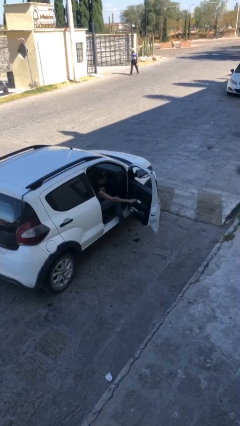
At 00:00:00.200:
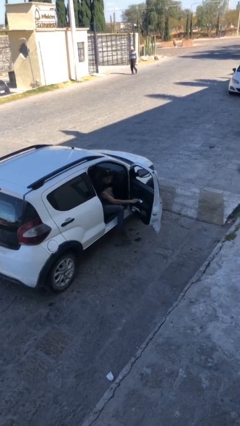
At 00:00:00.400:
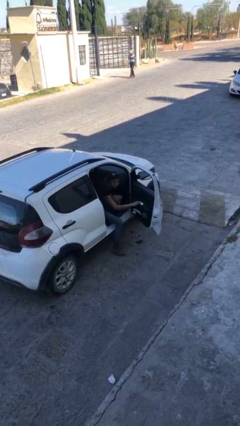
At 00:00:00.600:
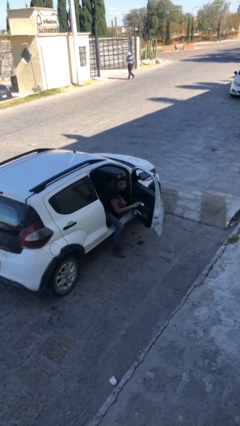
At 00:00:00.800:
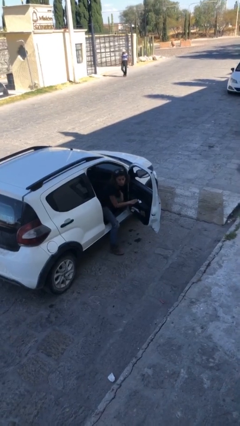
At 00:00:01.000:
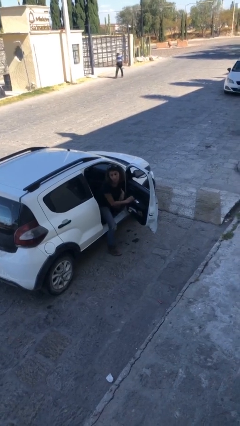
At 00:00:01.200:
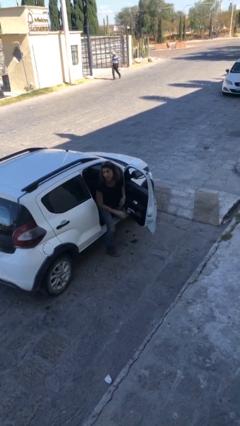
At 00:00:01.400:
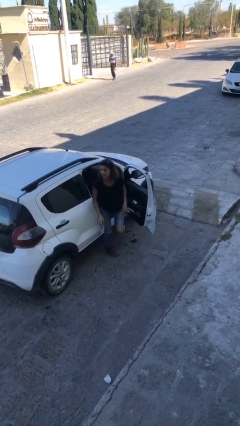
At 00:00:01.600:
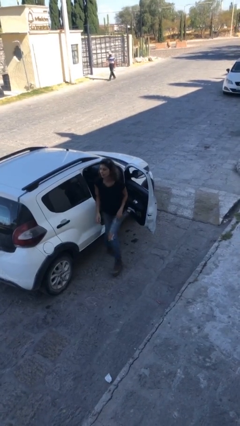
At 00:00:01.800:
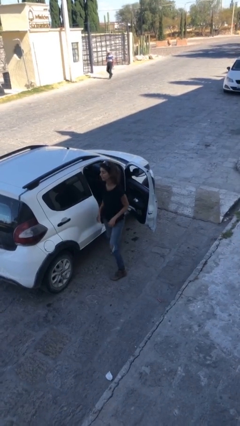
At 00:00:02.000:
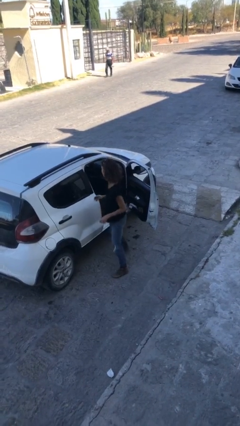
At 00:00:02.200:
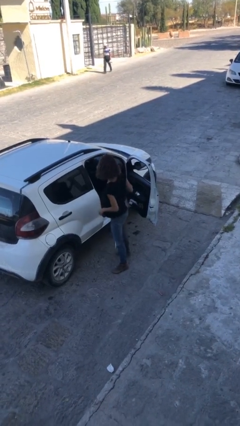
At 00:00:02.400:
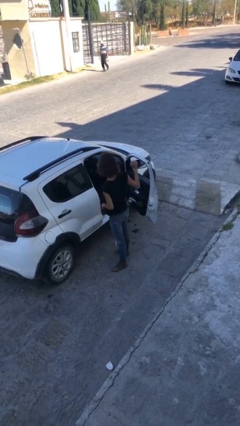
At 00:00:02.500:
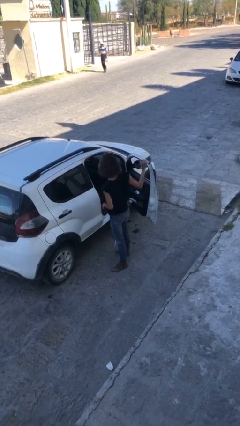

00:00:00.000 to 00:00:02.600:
person exits car

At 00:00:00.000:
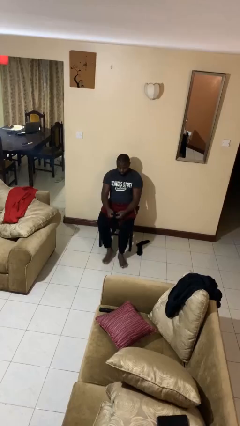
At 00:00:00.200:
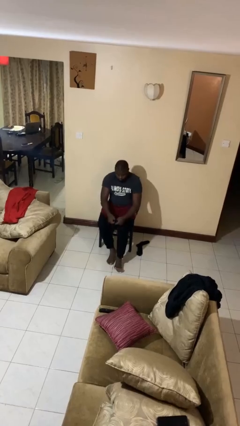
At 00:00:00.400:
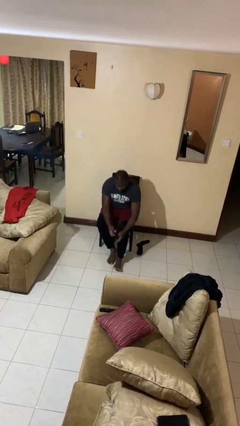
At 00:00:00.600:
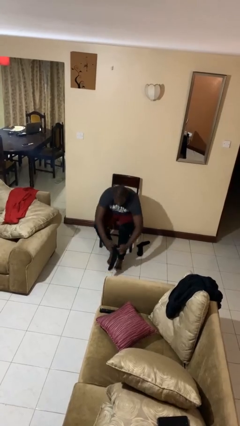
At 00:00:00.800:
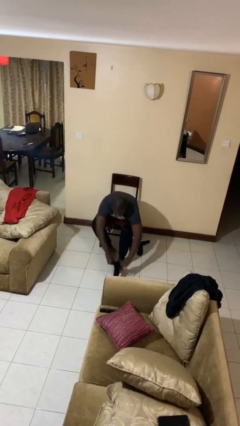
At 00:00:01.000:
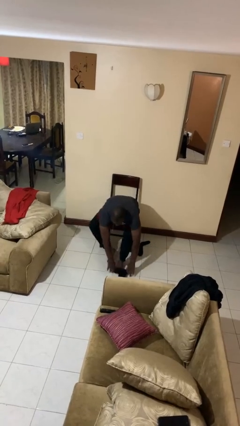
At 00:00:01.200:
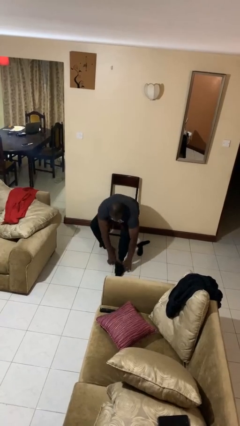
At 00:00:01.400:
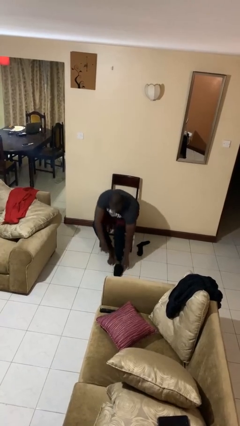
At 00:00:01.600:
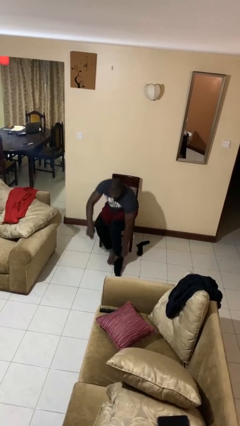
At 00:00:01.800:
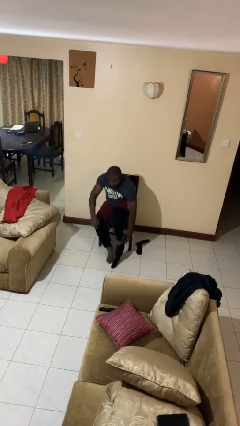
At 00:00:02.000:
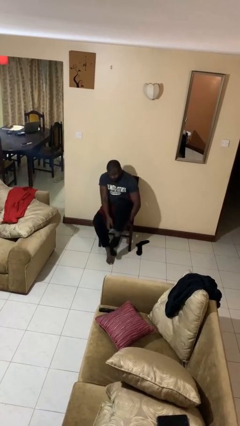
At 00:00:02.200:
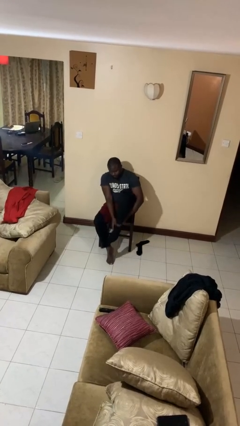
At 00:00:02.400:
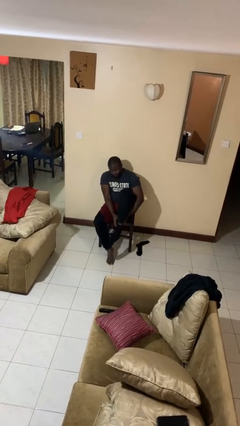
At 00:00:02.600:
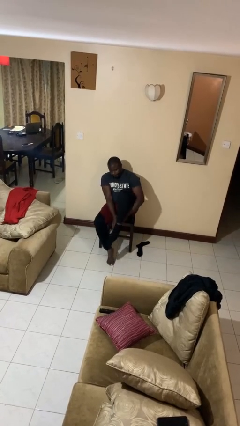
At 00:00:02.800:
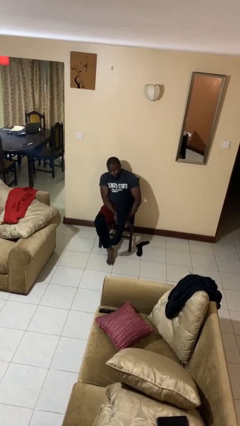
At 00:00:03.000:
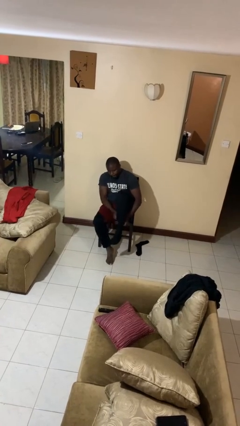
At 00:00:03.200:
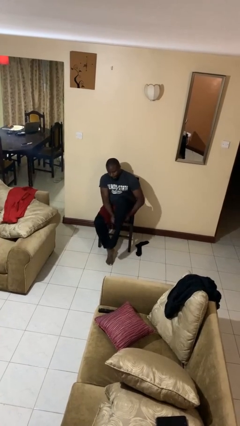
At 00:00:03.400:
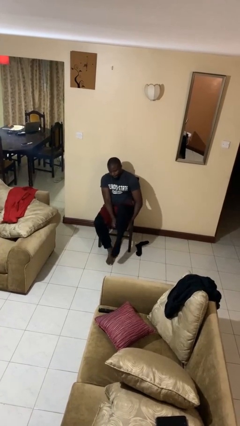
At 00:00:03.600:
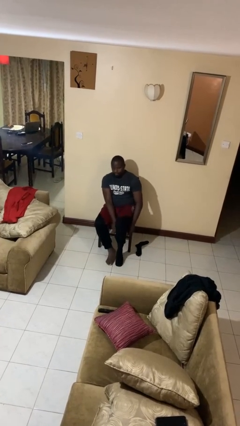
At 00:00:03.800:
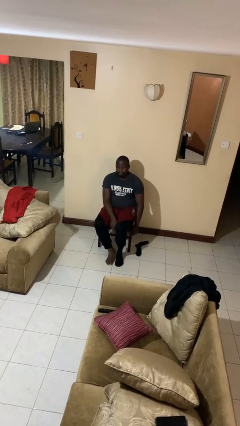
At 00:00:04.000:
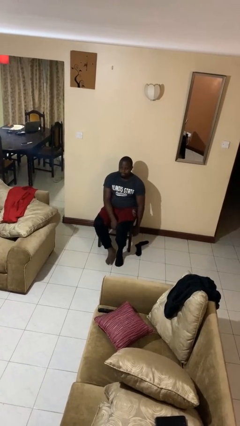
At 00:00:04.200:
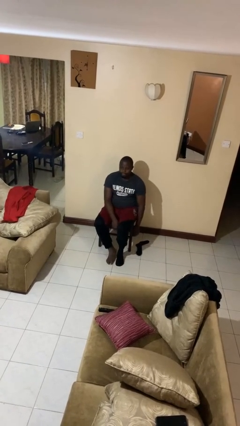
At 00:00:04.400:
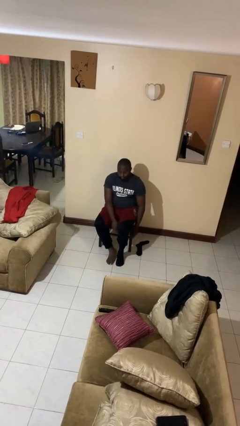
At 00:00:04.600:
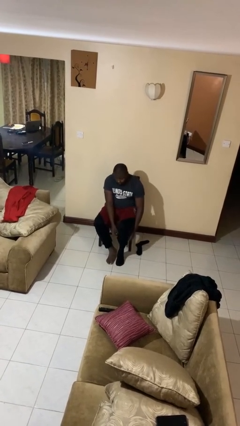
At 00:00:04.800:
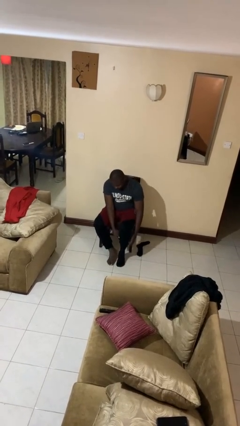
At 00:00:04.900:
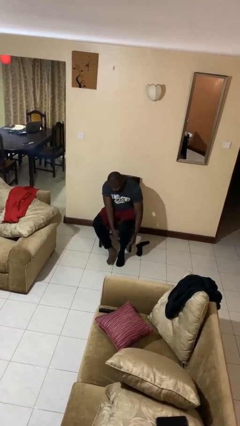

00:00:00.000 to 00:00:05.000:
person puts on socks

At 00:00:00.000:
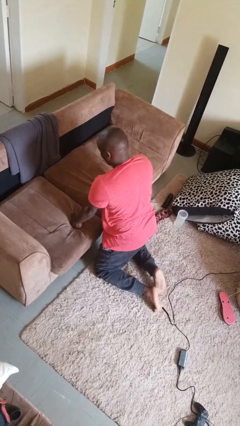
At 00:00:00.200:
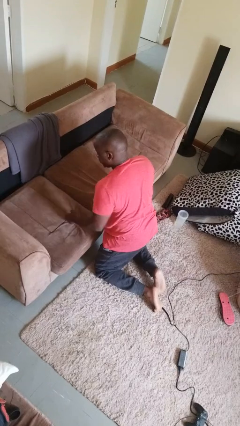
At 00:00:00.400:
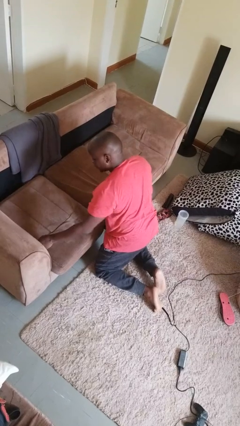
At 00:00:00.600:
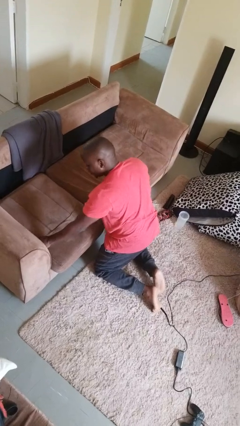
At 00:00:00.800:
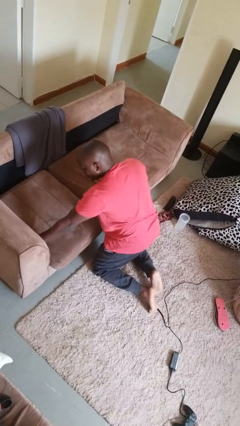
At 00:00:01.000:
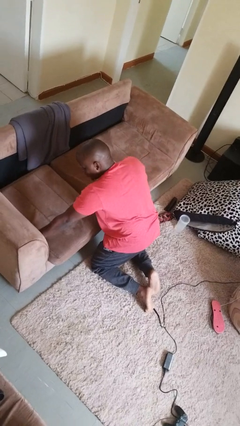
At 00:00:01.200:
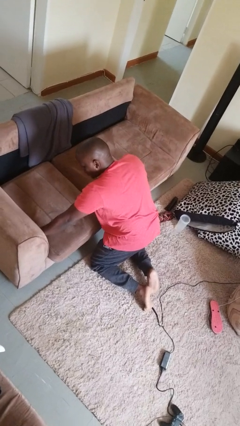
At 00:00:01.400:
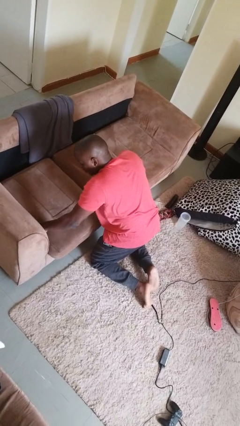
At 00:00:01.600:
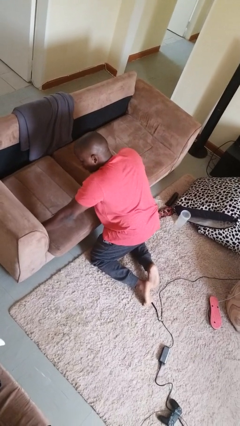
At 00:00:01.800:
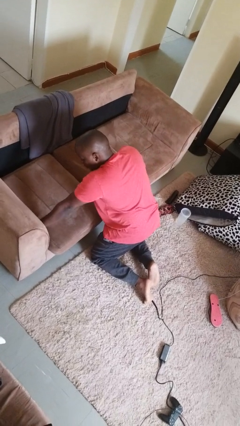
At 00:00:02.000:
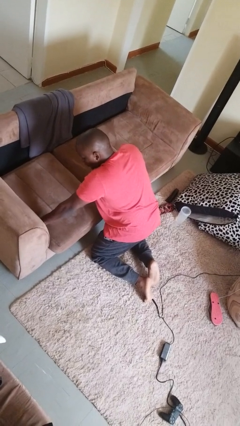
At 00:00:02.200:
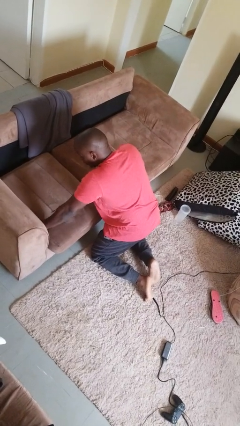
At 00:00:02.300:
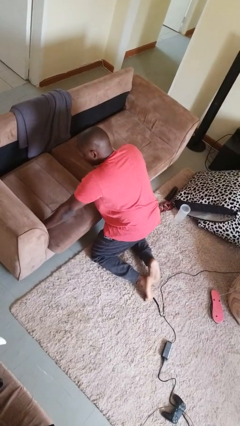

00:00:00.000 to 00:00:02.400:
person searches in couch

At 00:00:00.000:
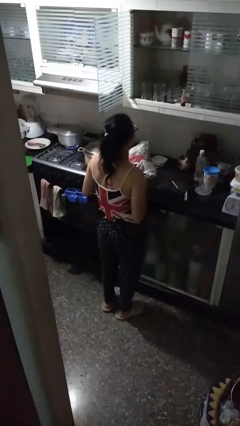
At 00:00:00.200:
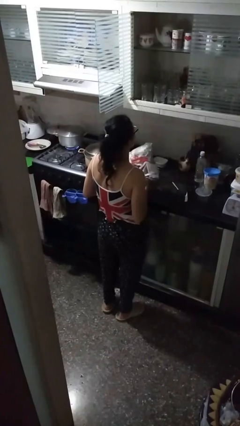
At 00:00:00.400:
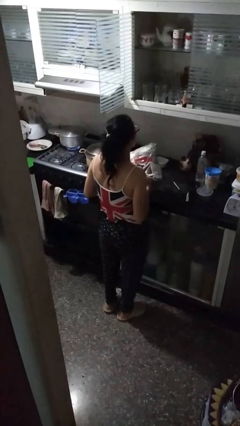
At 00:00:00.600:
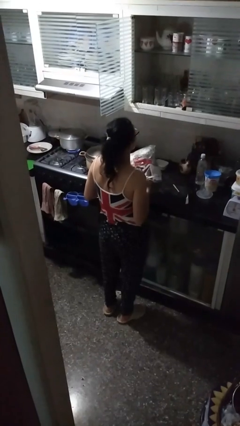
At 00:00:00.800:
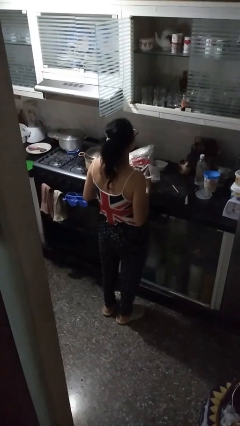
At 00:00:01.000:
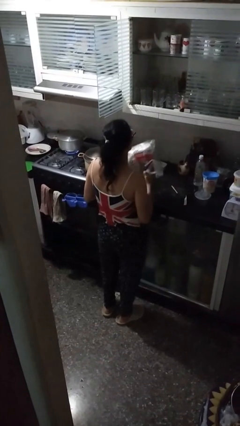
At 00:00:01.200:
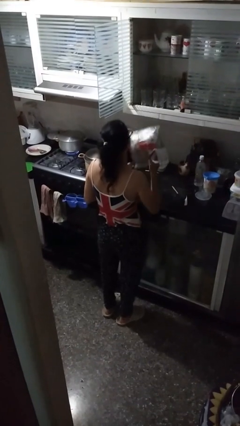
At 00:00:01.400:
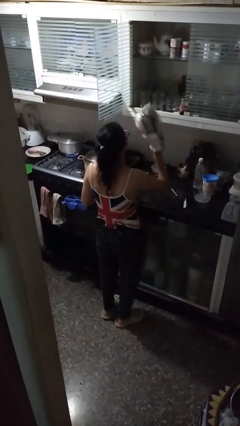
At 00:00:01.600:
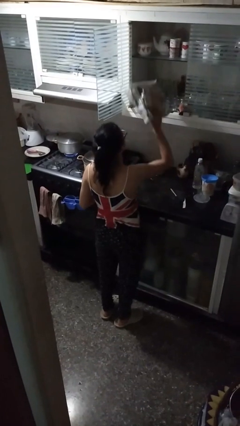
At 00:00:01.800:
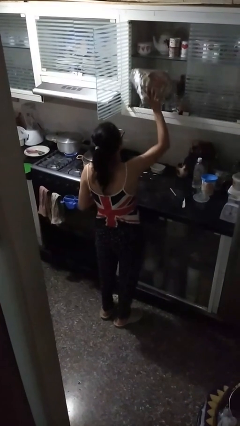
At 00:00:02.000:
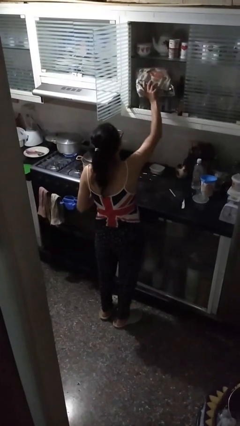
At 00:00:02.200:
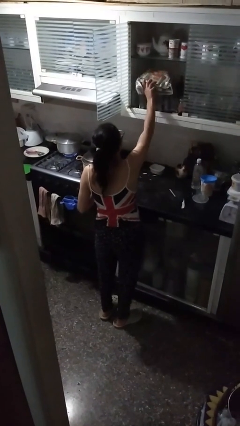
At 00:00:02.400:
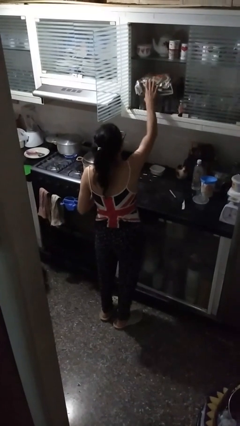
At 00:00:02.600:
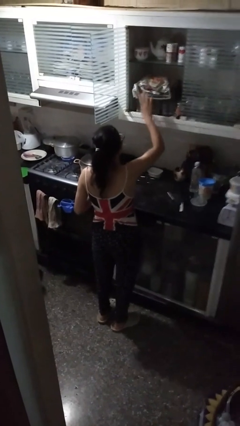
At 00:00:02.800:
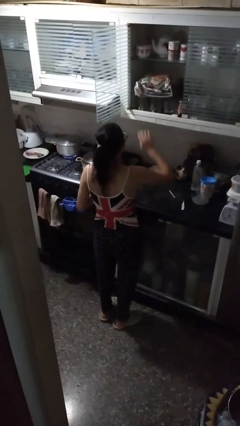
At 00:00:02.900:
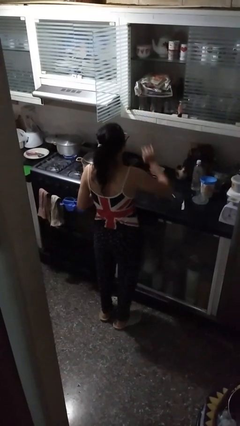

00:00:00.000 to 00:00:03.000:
person puts down object into cabinet

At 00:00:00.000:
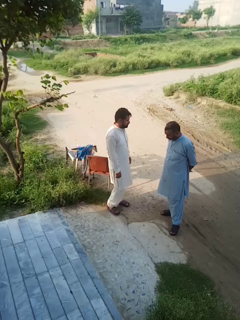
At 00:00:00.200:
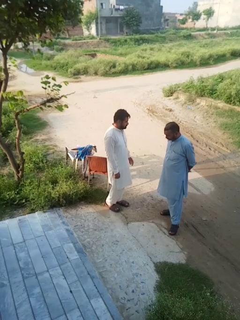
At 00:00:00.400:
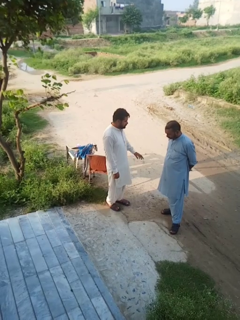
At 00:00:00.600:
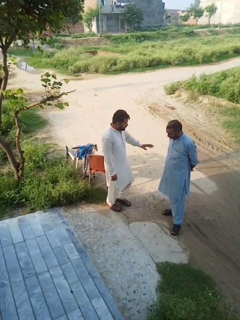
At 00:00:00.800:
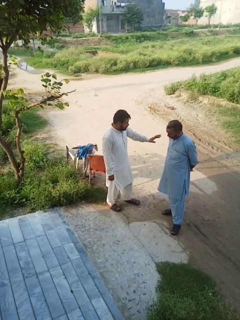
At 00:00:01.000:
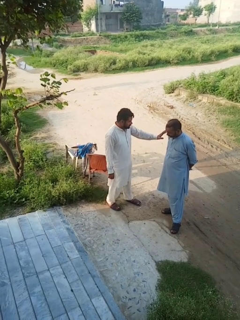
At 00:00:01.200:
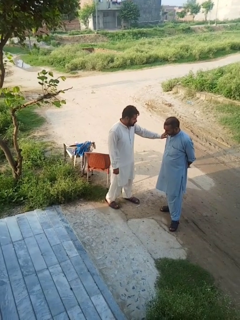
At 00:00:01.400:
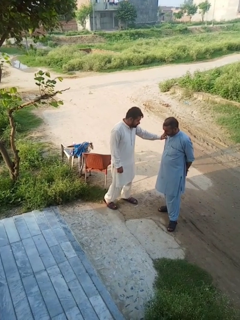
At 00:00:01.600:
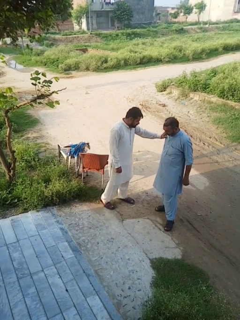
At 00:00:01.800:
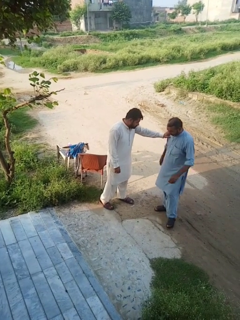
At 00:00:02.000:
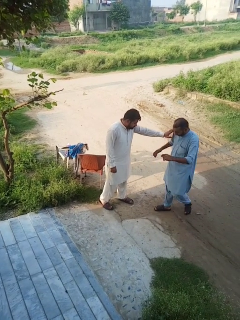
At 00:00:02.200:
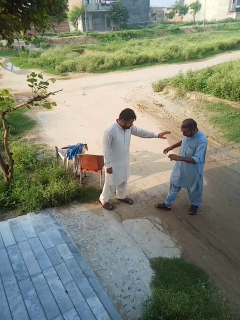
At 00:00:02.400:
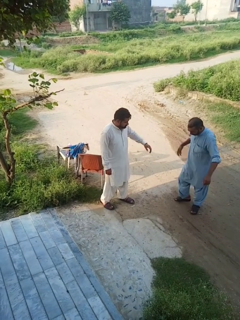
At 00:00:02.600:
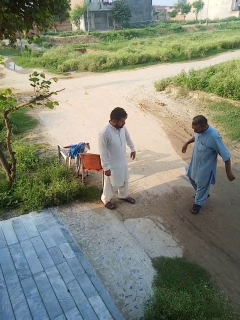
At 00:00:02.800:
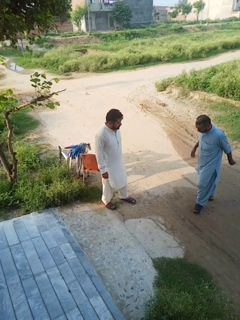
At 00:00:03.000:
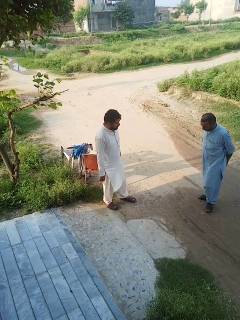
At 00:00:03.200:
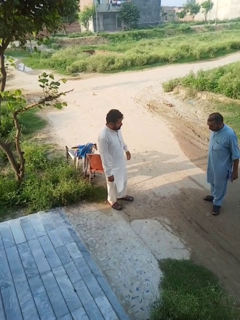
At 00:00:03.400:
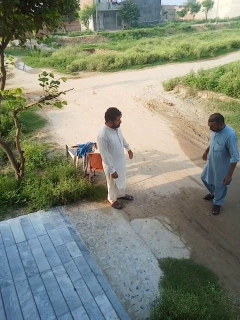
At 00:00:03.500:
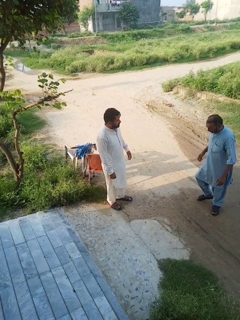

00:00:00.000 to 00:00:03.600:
person shoves person

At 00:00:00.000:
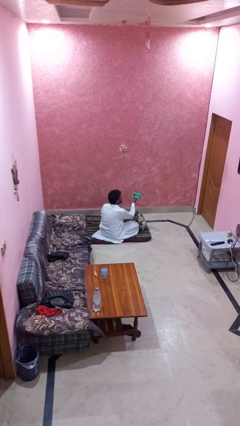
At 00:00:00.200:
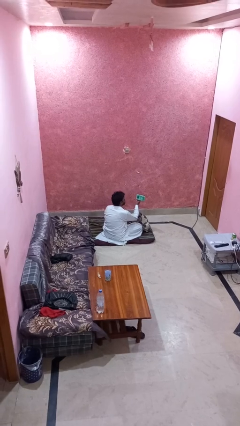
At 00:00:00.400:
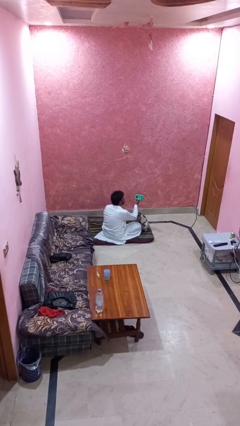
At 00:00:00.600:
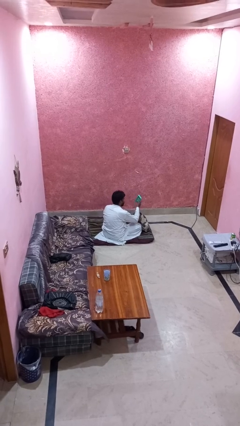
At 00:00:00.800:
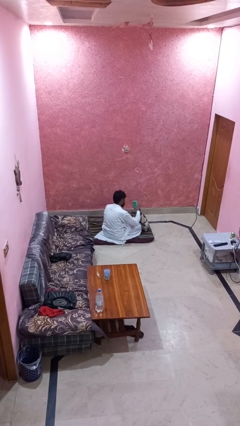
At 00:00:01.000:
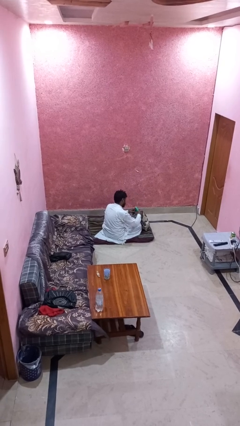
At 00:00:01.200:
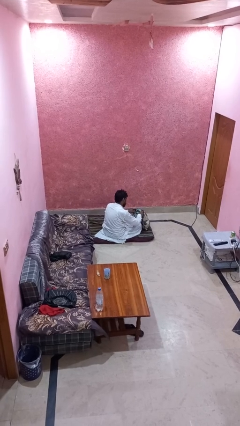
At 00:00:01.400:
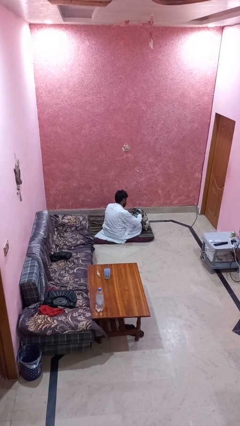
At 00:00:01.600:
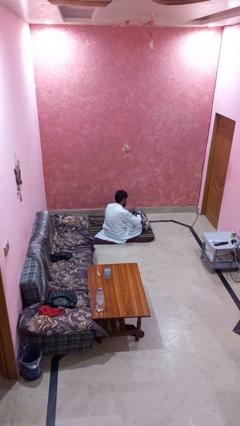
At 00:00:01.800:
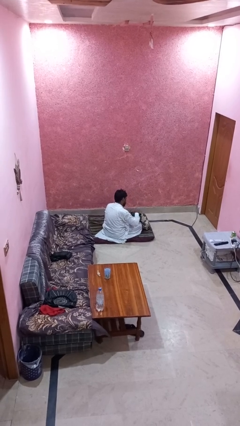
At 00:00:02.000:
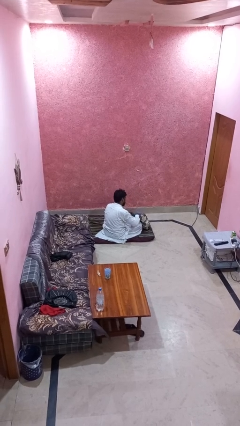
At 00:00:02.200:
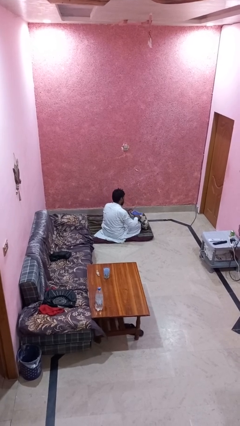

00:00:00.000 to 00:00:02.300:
person puts object into backpack
